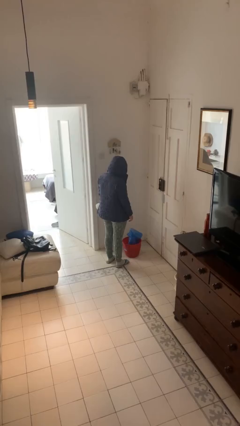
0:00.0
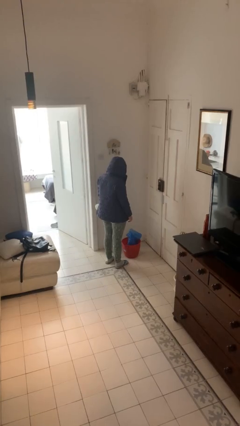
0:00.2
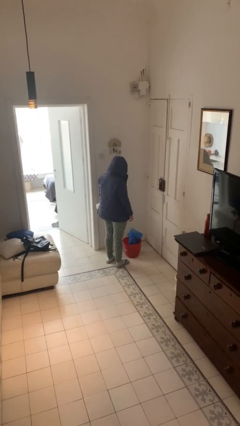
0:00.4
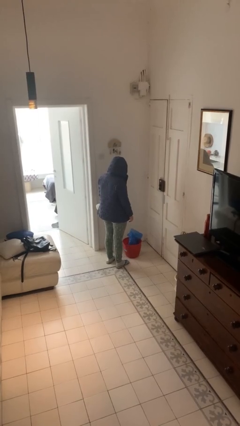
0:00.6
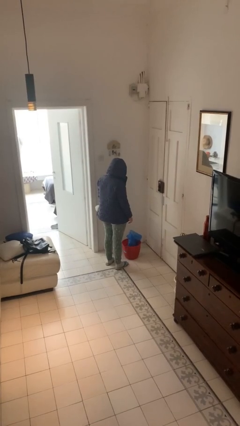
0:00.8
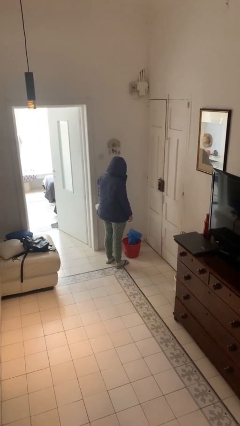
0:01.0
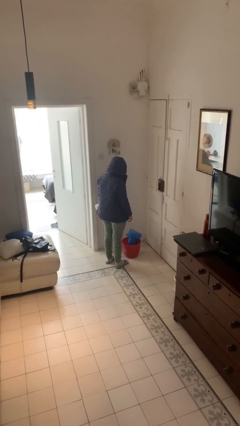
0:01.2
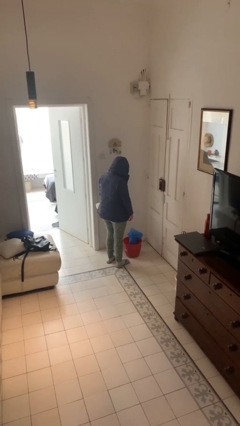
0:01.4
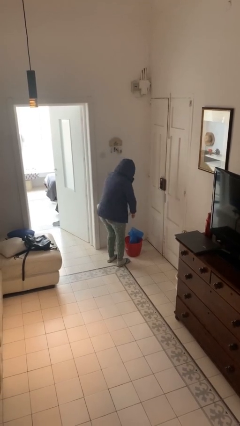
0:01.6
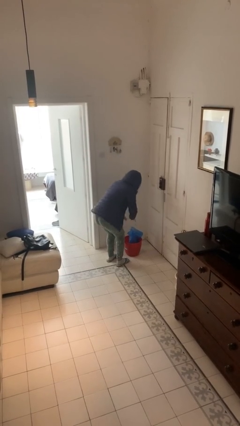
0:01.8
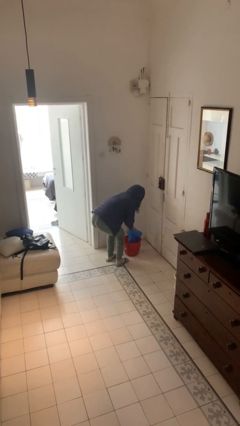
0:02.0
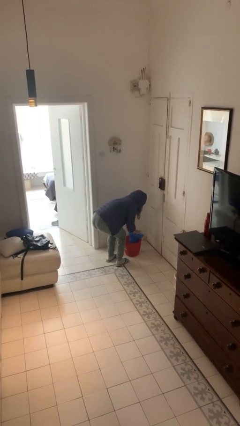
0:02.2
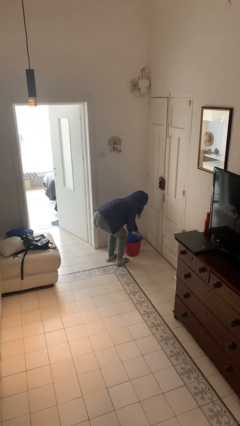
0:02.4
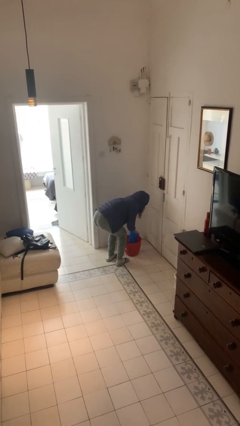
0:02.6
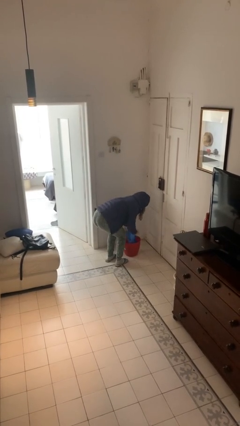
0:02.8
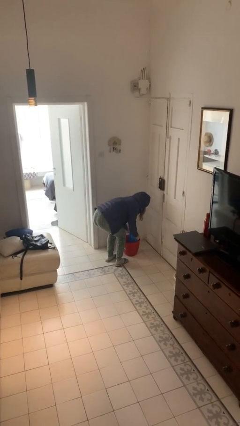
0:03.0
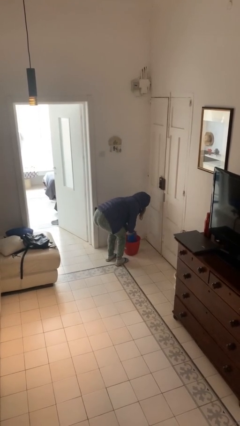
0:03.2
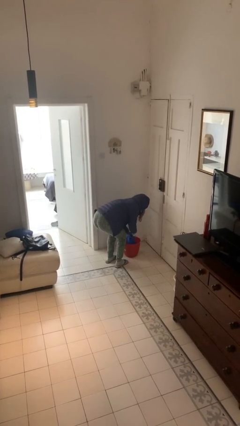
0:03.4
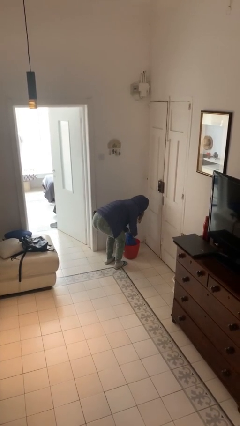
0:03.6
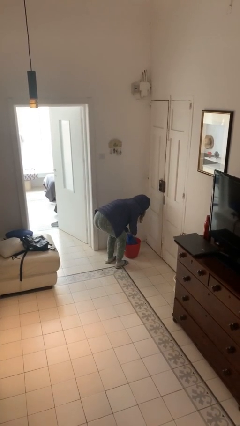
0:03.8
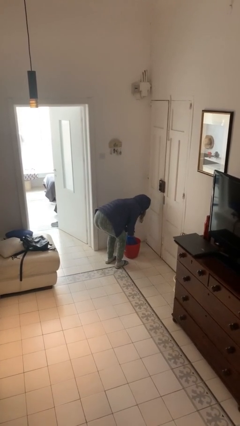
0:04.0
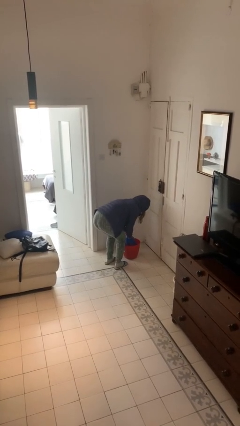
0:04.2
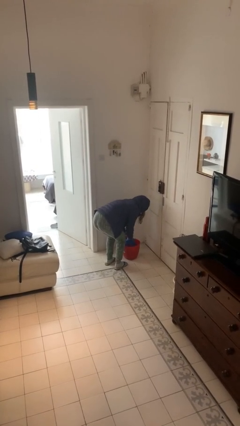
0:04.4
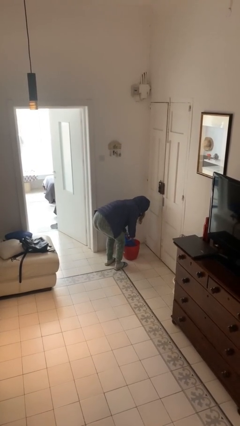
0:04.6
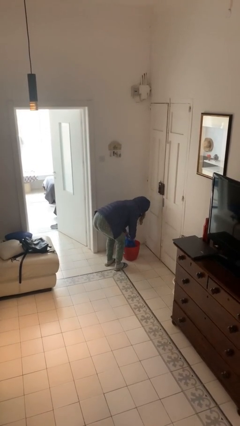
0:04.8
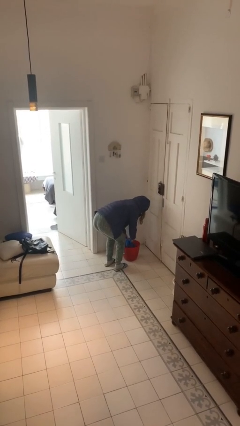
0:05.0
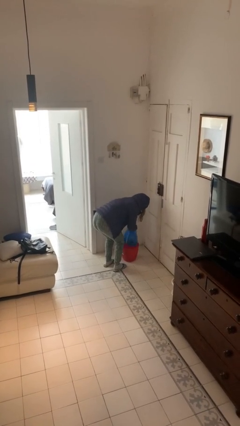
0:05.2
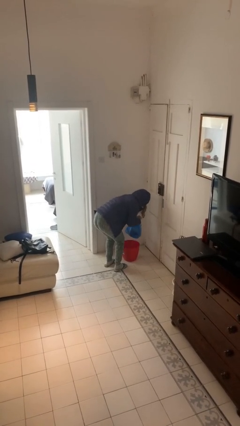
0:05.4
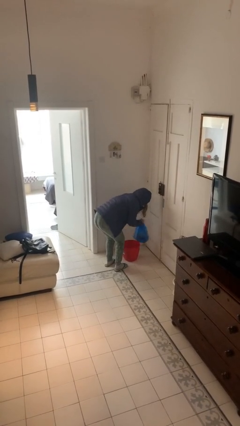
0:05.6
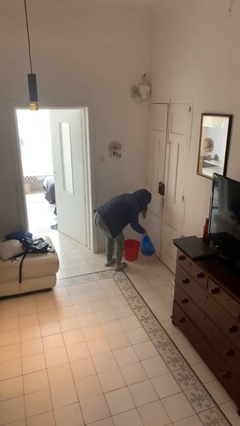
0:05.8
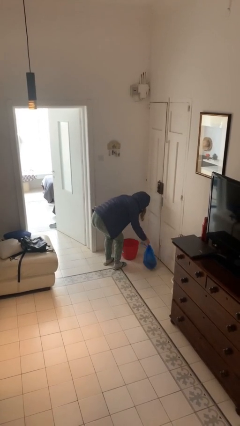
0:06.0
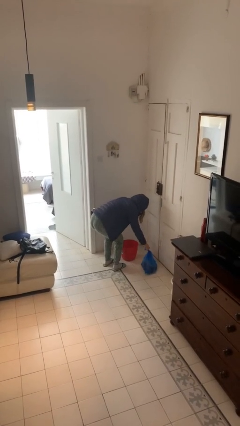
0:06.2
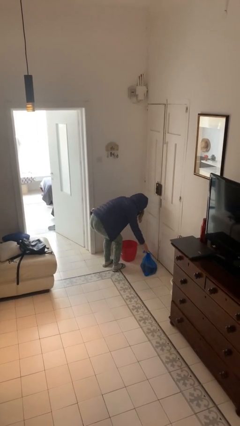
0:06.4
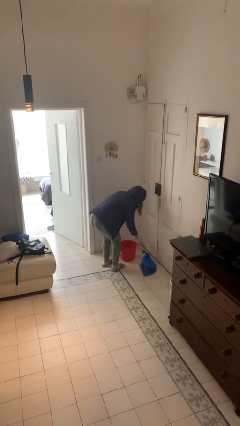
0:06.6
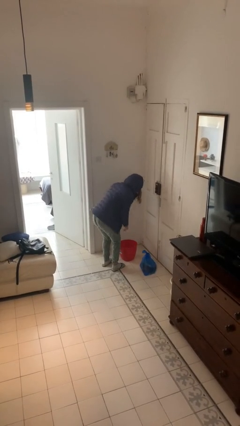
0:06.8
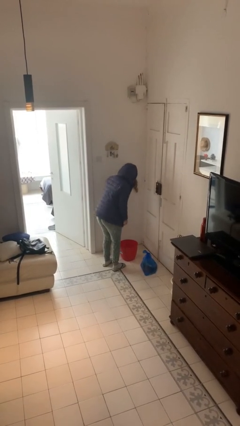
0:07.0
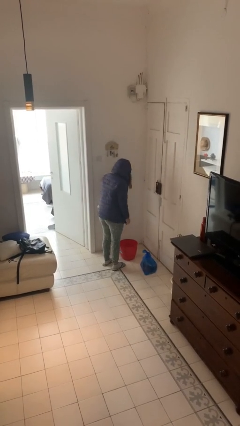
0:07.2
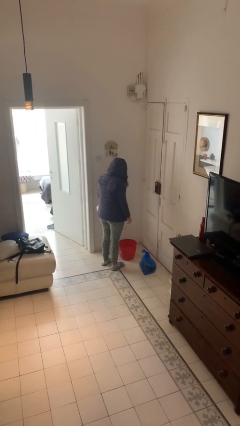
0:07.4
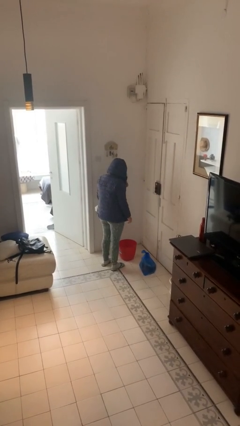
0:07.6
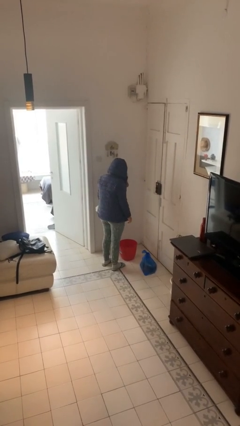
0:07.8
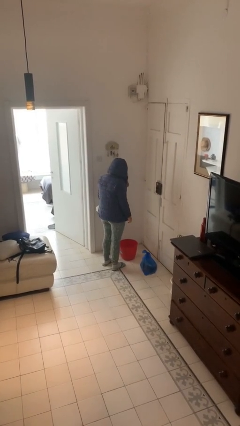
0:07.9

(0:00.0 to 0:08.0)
person removes trashbag from trashcan

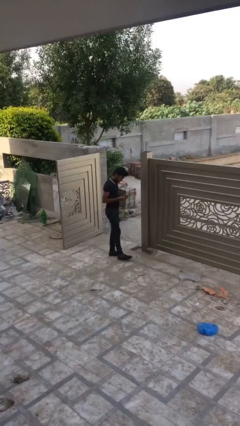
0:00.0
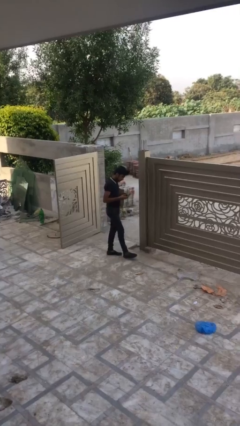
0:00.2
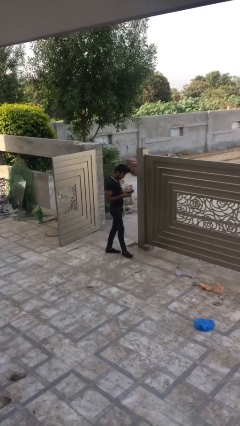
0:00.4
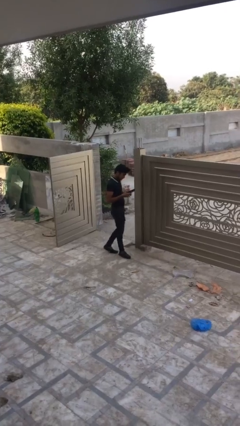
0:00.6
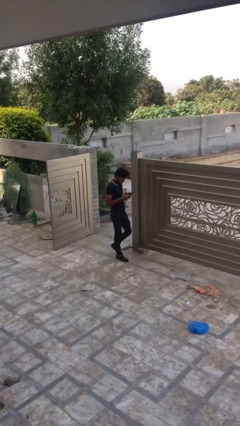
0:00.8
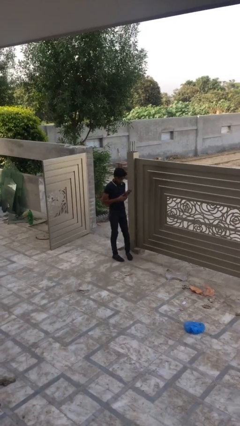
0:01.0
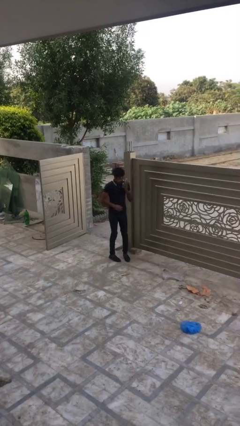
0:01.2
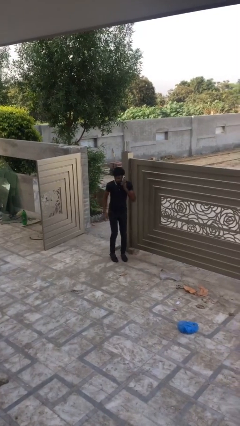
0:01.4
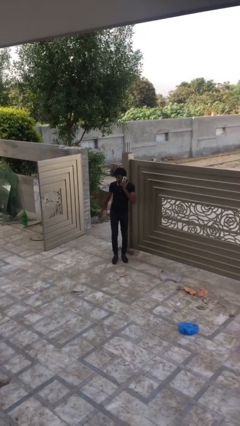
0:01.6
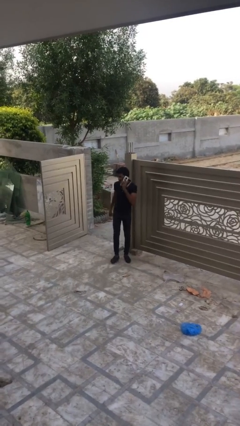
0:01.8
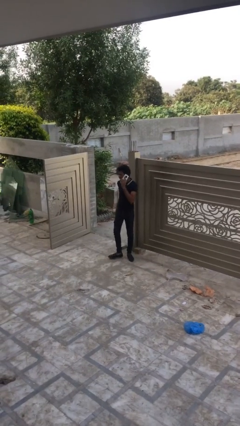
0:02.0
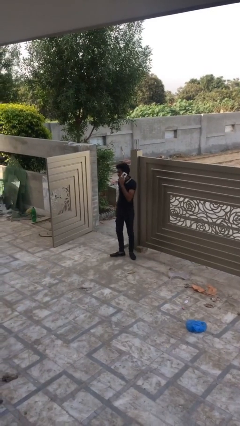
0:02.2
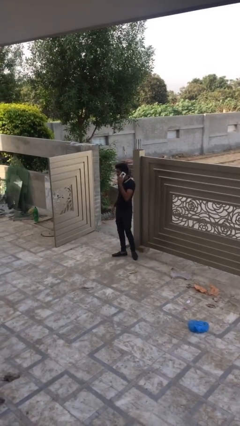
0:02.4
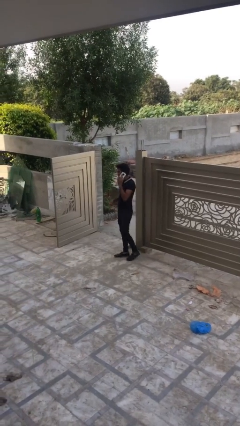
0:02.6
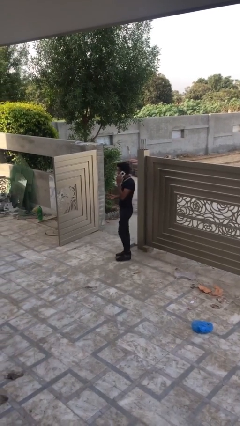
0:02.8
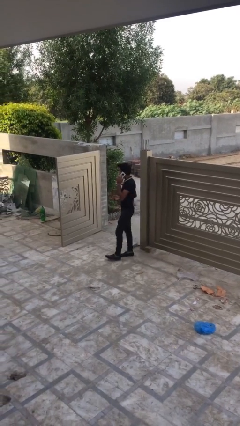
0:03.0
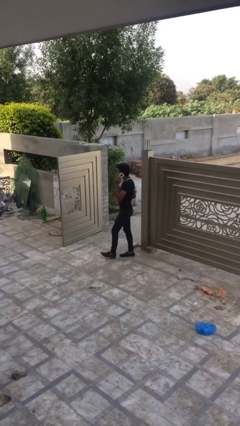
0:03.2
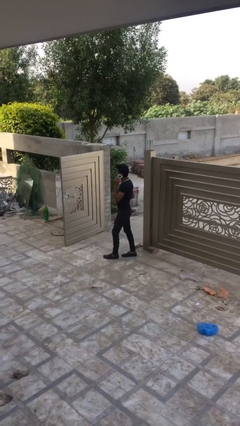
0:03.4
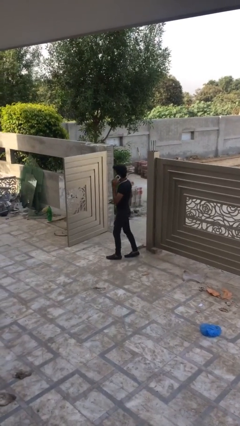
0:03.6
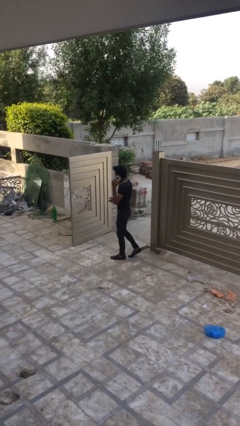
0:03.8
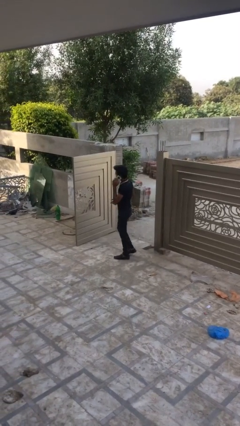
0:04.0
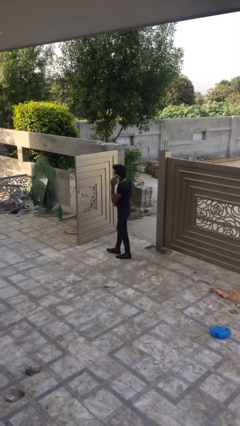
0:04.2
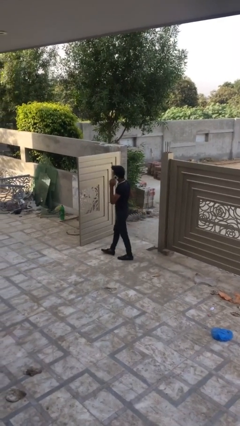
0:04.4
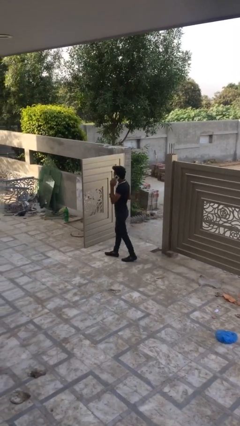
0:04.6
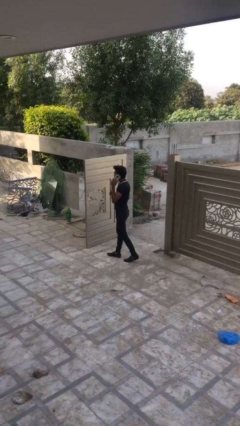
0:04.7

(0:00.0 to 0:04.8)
person talks on phone

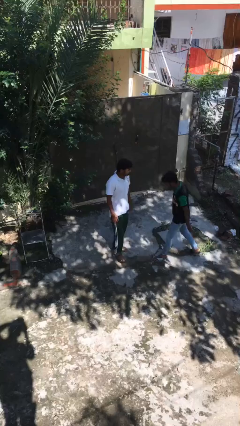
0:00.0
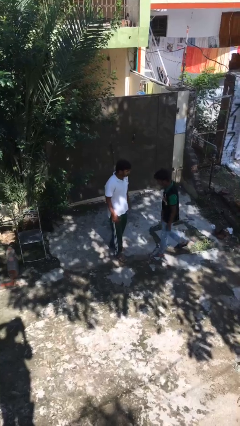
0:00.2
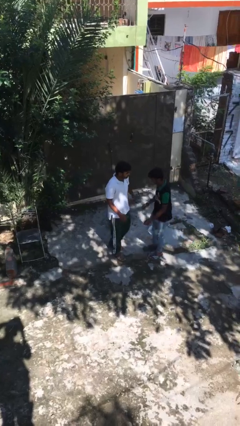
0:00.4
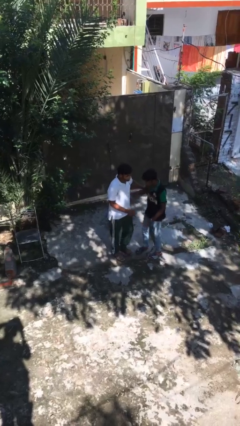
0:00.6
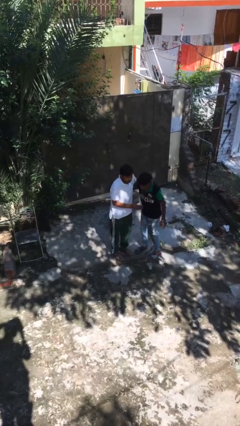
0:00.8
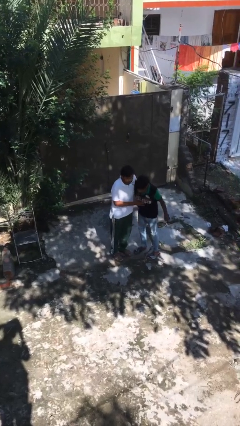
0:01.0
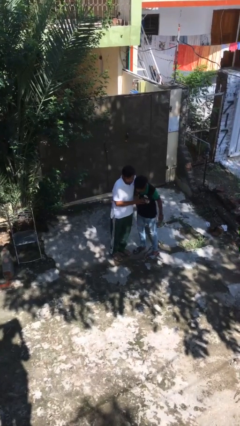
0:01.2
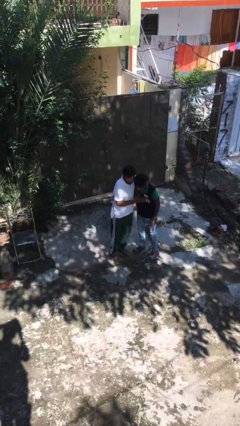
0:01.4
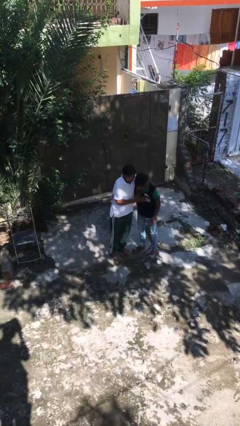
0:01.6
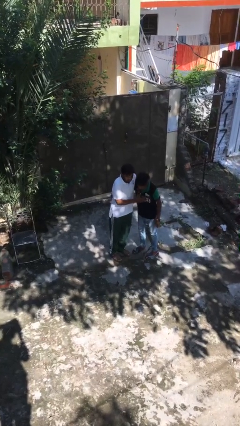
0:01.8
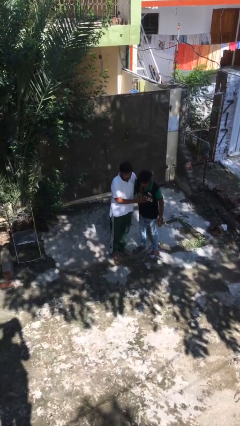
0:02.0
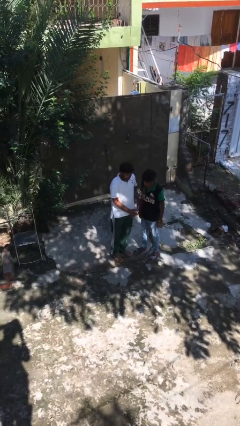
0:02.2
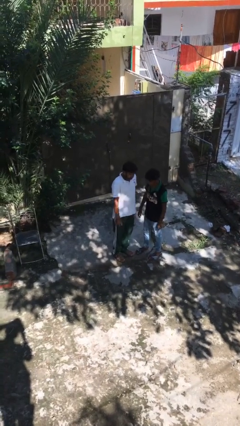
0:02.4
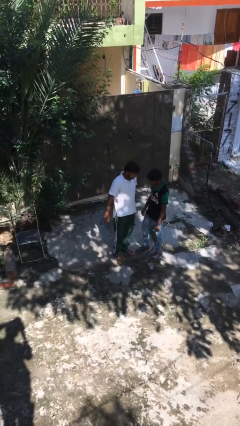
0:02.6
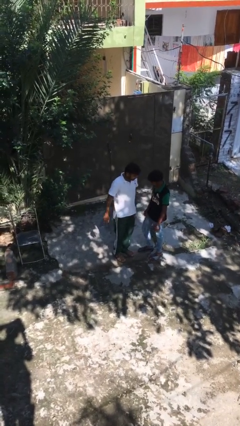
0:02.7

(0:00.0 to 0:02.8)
person embraces person

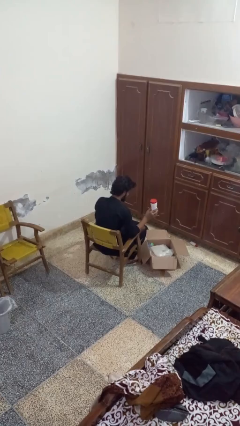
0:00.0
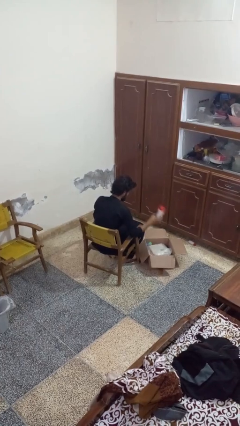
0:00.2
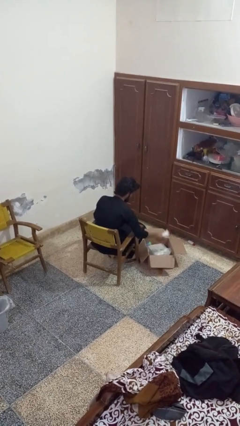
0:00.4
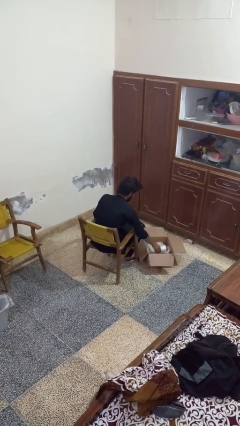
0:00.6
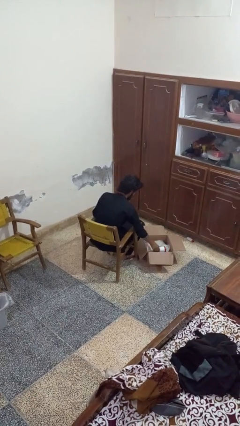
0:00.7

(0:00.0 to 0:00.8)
person puts object into box

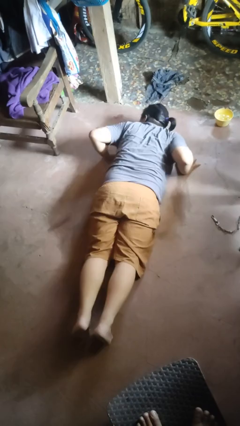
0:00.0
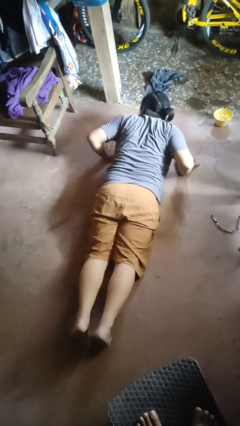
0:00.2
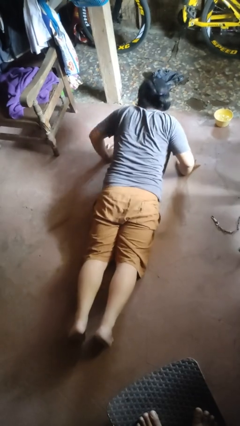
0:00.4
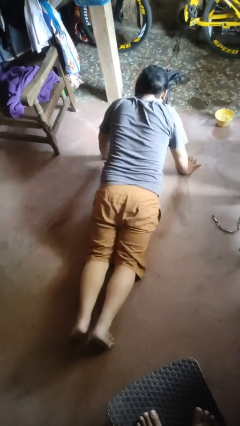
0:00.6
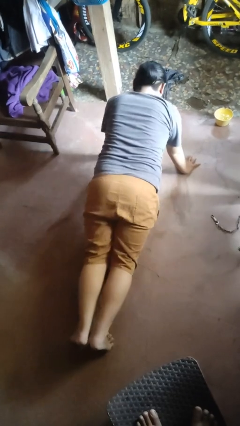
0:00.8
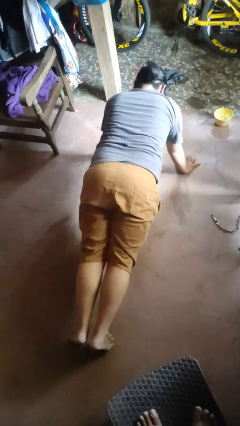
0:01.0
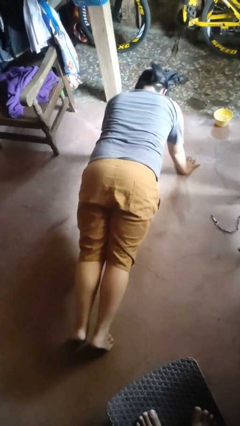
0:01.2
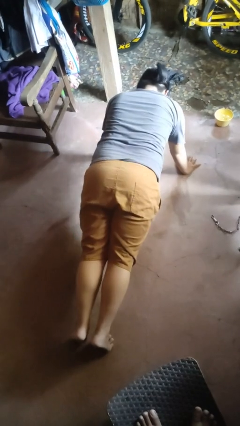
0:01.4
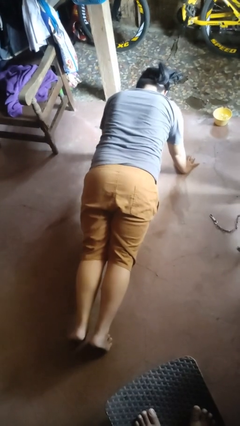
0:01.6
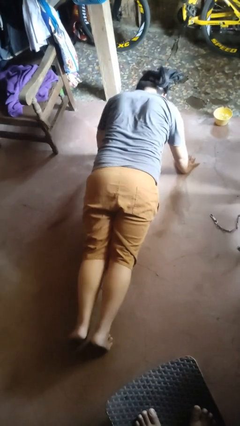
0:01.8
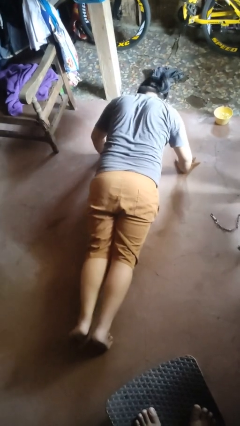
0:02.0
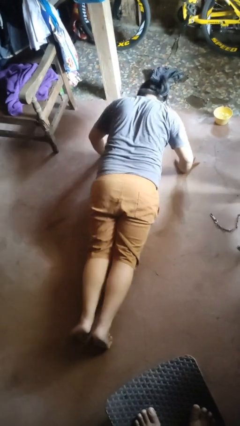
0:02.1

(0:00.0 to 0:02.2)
person exercises with pushup
